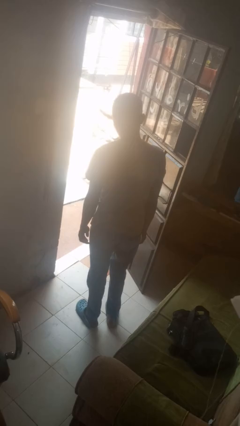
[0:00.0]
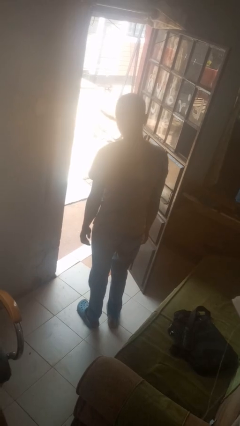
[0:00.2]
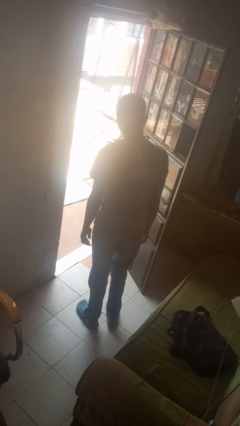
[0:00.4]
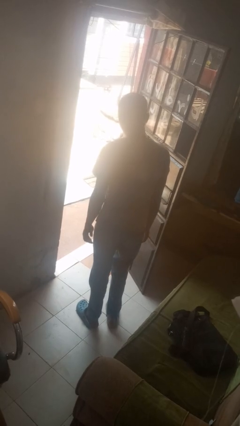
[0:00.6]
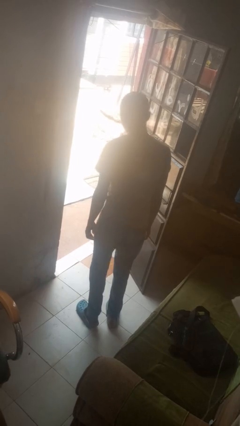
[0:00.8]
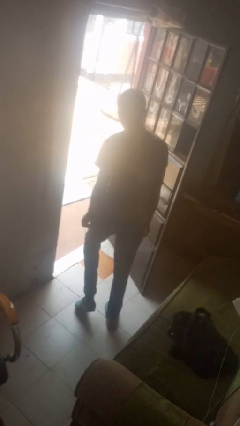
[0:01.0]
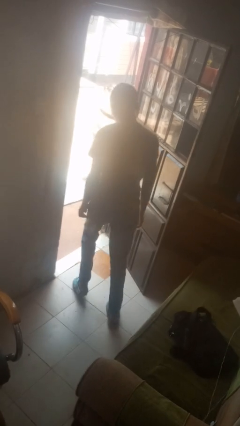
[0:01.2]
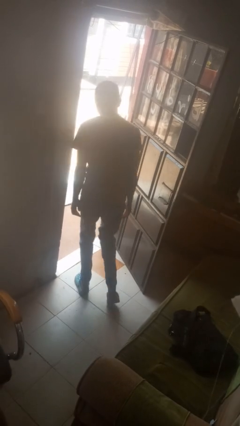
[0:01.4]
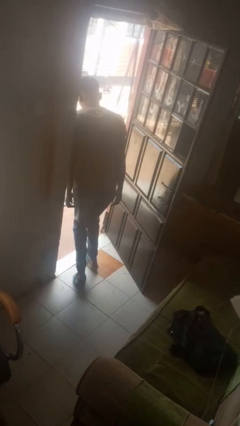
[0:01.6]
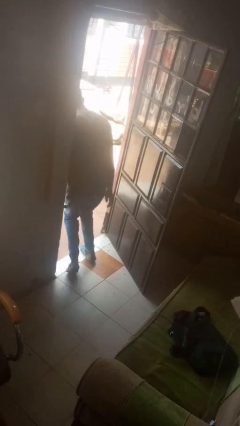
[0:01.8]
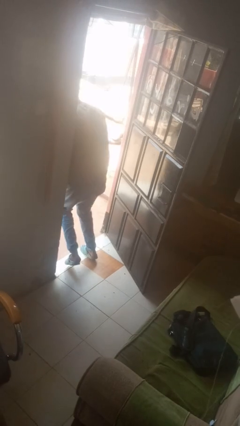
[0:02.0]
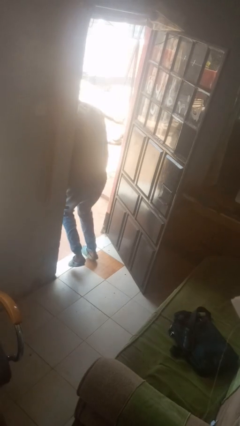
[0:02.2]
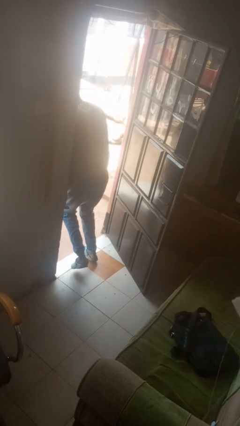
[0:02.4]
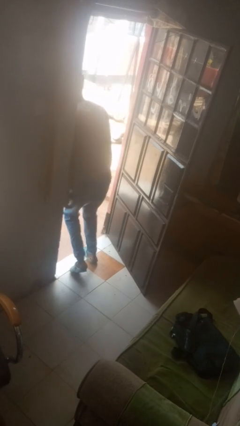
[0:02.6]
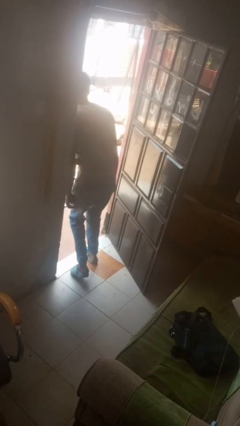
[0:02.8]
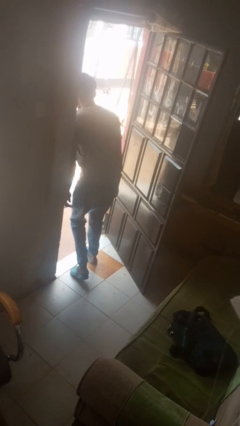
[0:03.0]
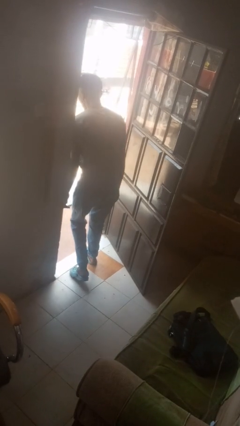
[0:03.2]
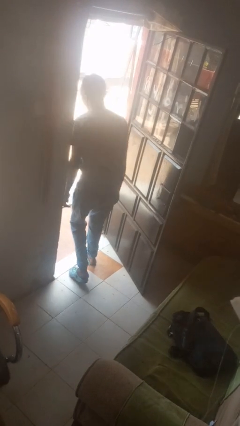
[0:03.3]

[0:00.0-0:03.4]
person bumps into wall

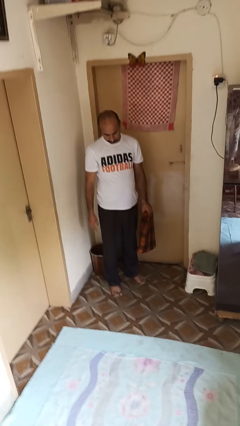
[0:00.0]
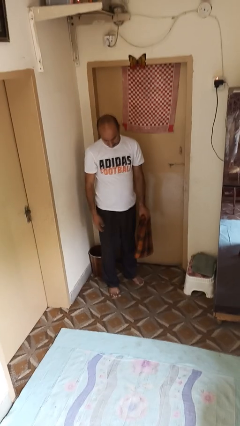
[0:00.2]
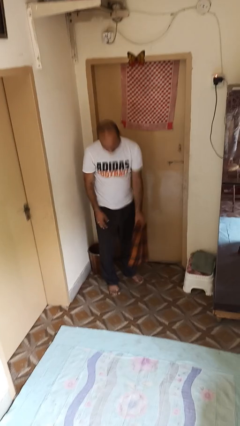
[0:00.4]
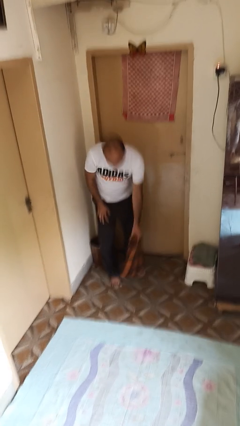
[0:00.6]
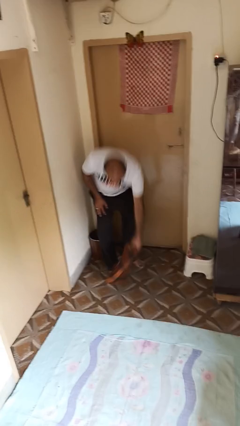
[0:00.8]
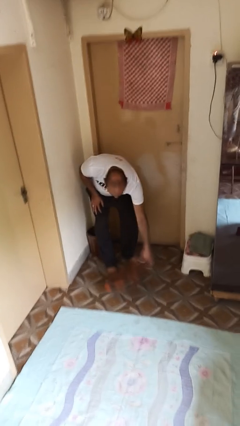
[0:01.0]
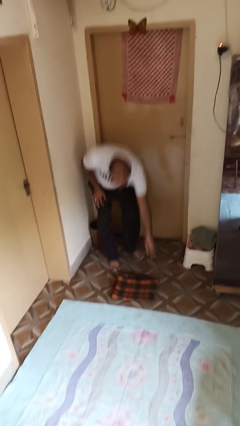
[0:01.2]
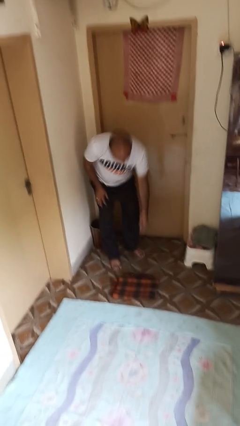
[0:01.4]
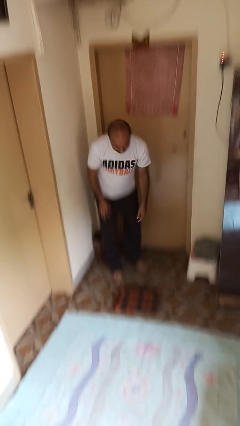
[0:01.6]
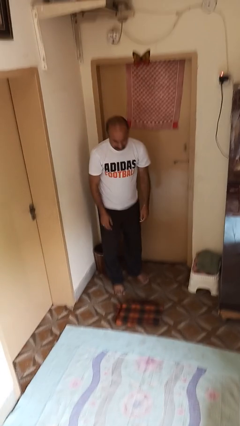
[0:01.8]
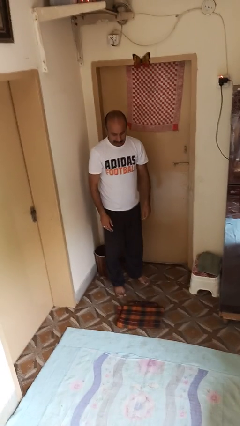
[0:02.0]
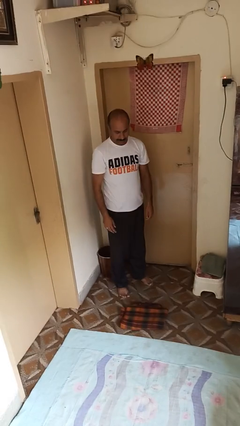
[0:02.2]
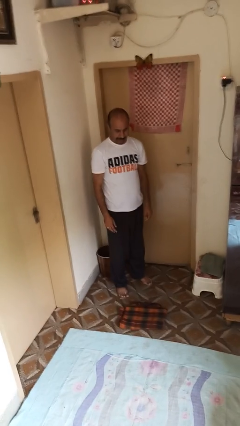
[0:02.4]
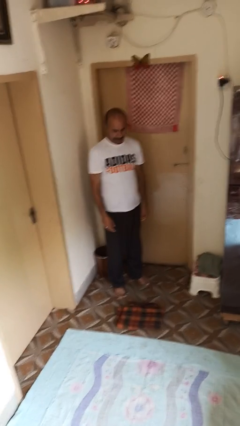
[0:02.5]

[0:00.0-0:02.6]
person puts down object on couch

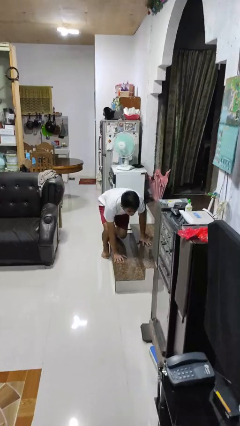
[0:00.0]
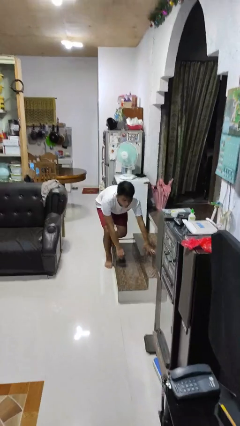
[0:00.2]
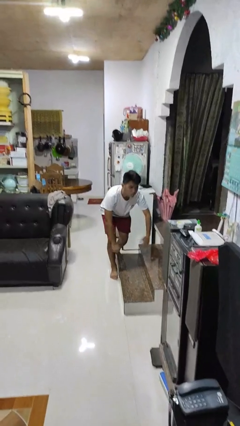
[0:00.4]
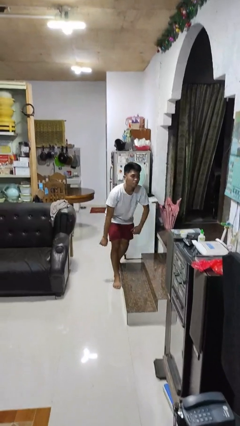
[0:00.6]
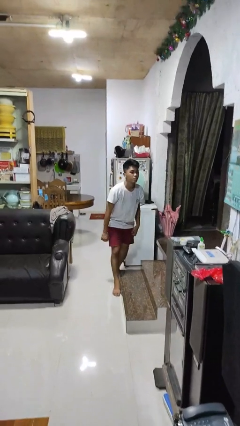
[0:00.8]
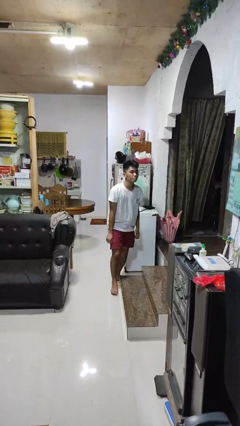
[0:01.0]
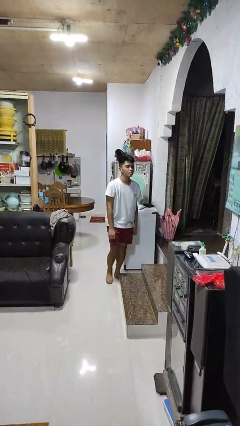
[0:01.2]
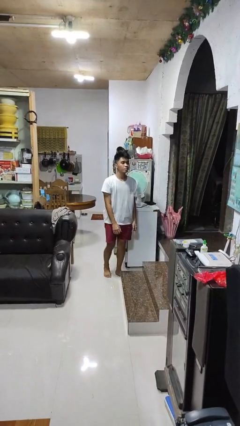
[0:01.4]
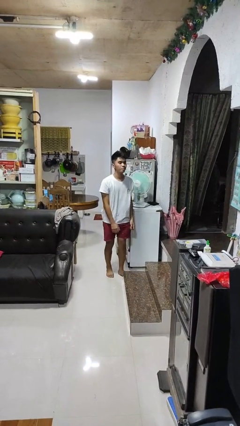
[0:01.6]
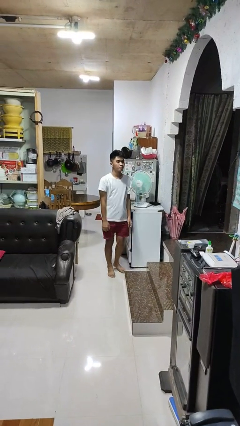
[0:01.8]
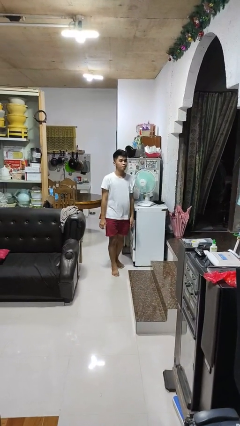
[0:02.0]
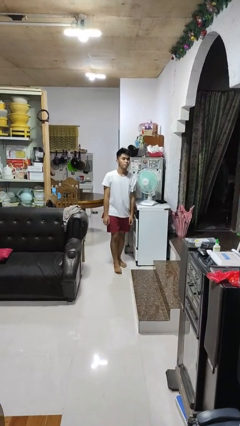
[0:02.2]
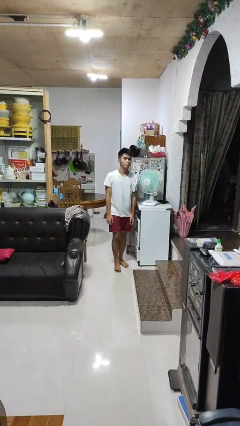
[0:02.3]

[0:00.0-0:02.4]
person stands up from floor

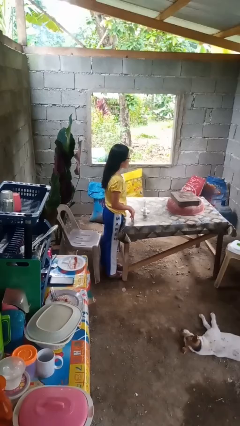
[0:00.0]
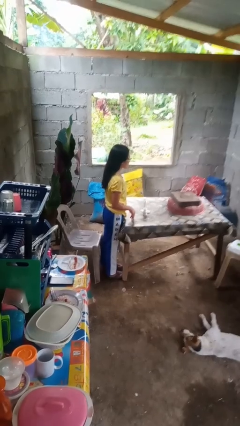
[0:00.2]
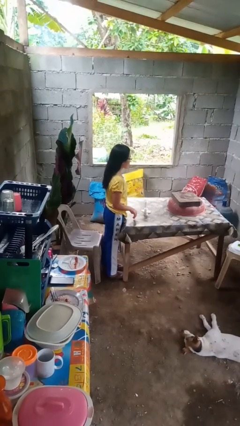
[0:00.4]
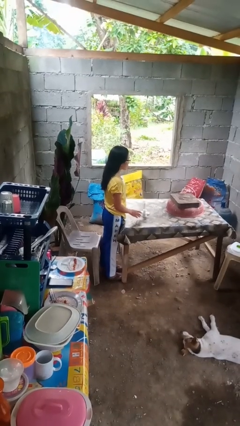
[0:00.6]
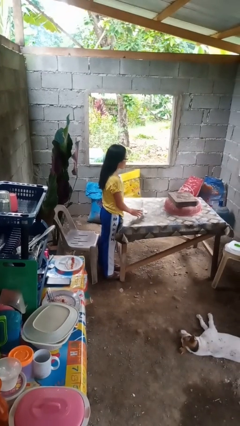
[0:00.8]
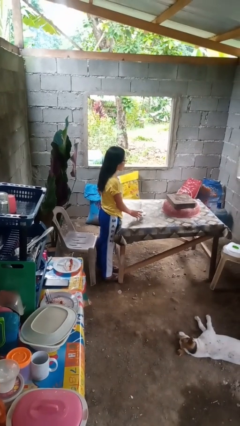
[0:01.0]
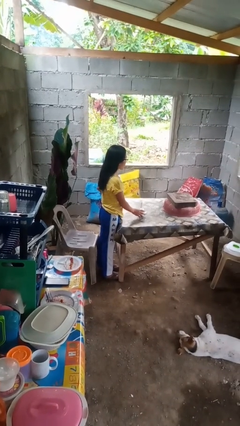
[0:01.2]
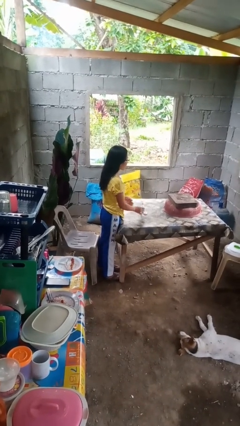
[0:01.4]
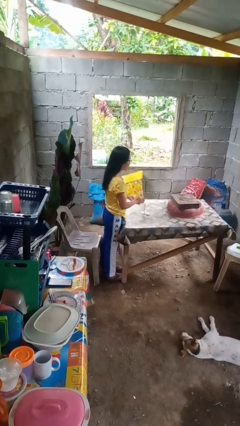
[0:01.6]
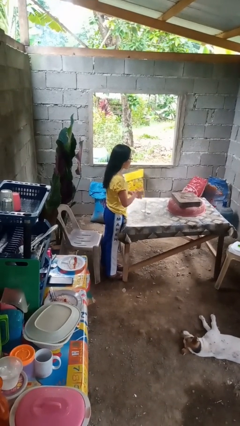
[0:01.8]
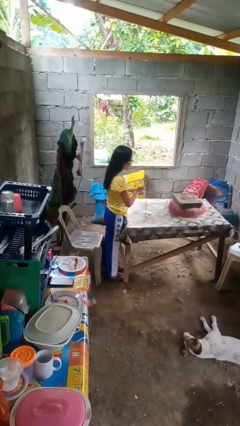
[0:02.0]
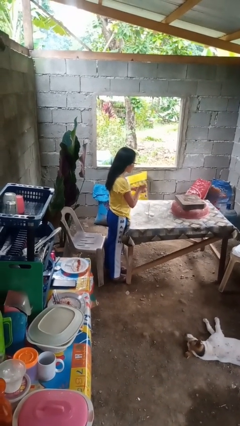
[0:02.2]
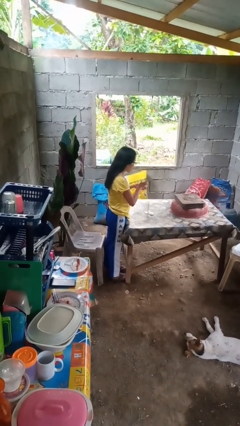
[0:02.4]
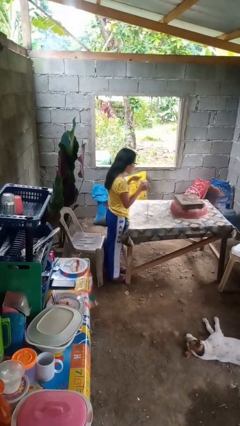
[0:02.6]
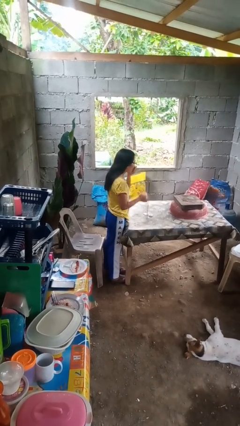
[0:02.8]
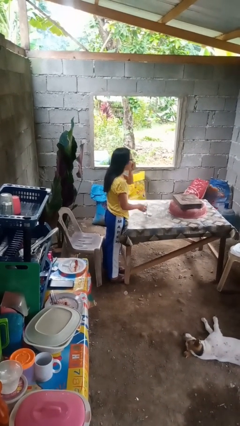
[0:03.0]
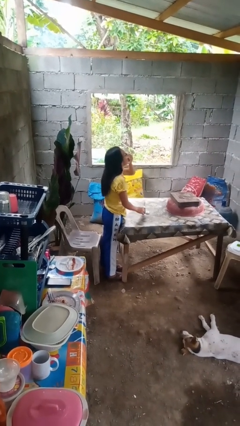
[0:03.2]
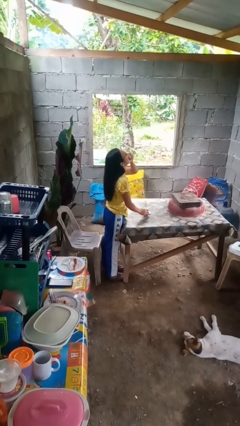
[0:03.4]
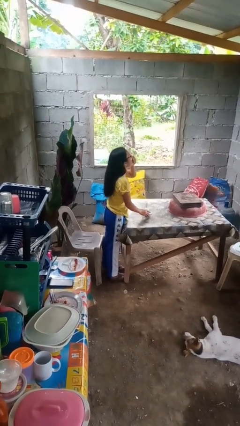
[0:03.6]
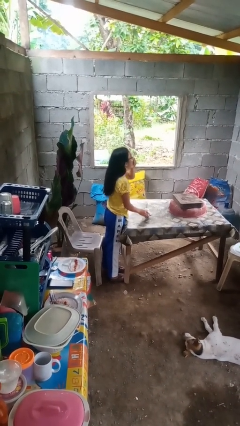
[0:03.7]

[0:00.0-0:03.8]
person takes medicine pills

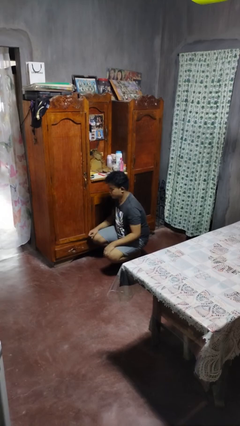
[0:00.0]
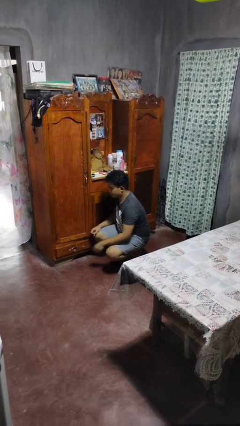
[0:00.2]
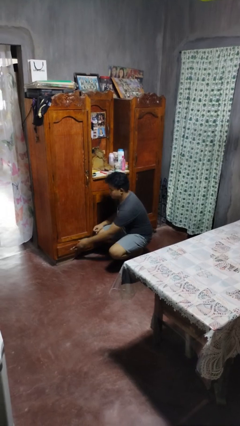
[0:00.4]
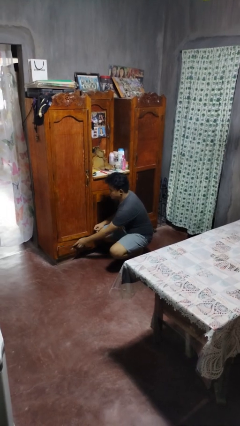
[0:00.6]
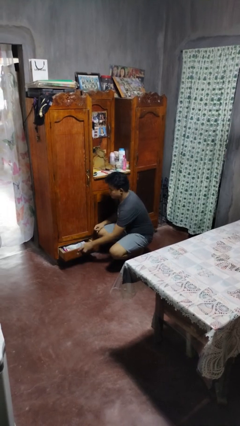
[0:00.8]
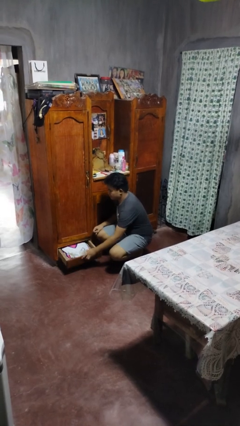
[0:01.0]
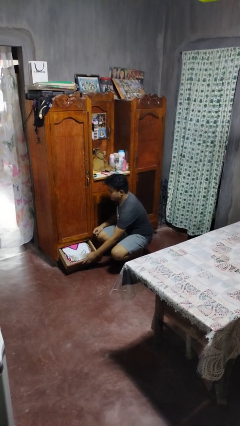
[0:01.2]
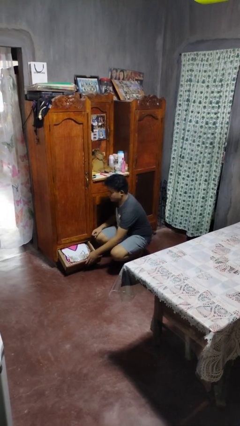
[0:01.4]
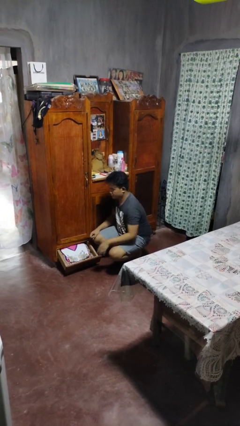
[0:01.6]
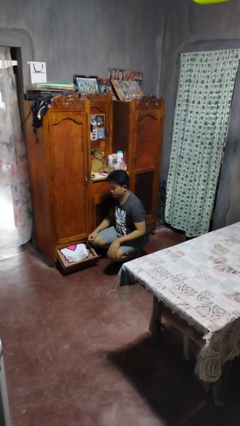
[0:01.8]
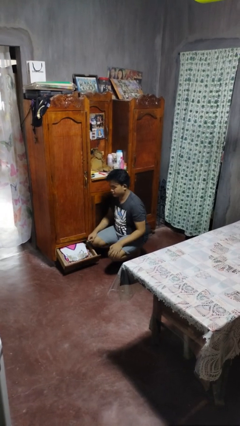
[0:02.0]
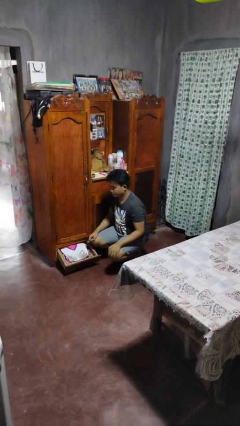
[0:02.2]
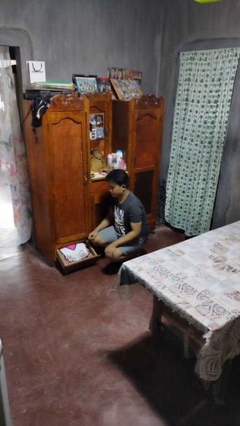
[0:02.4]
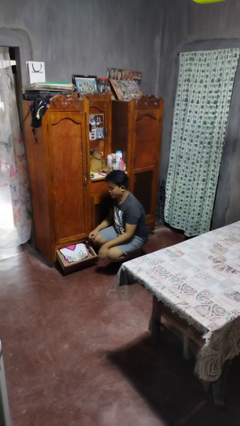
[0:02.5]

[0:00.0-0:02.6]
person opens dresser drawer

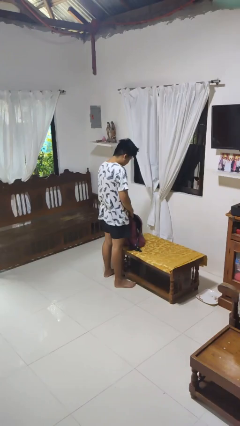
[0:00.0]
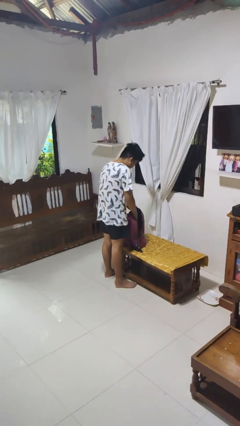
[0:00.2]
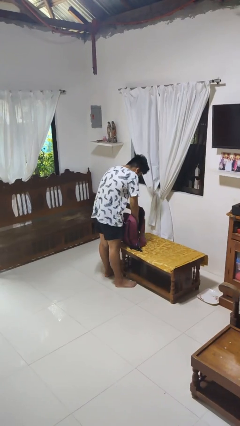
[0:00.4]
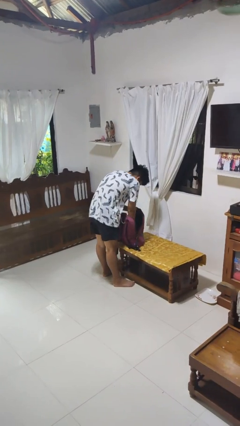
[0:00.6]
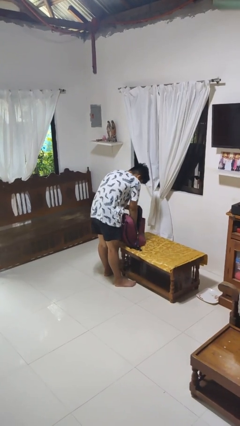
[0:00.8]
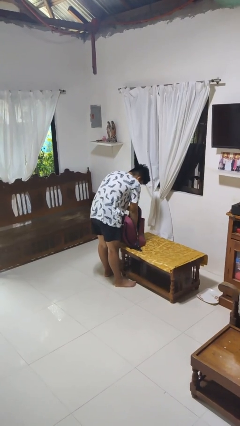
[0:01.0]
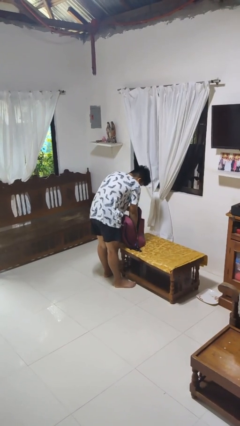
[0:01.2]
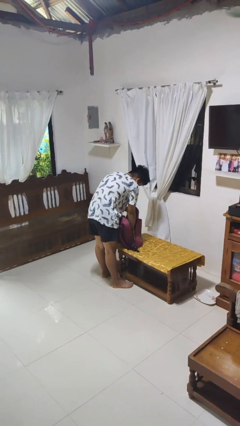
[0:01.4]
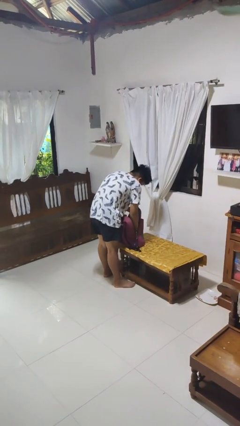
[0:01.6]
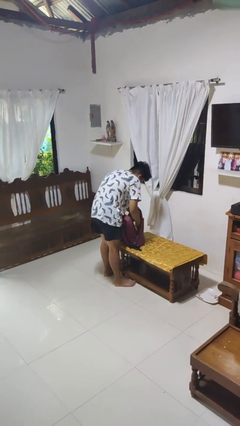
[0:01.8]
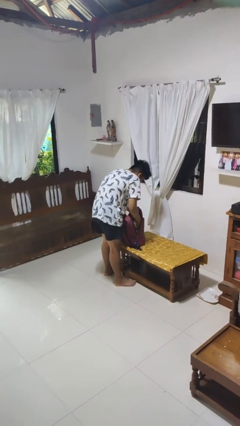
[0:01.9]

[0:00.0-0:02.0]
person searches in bag

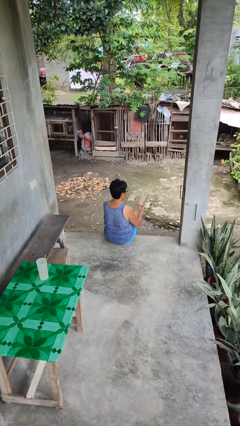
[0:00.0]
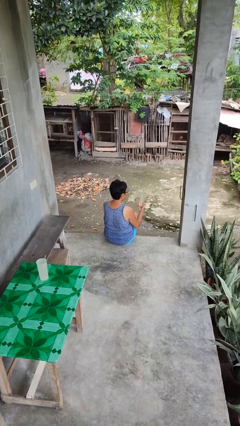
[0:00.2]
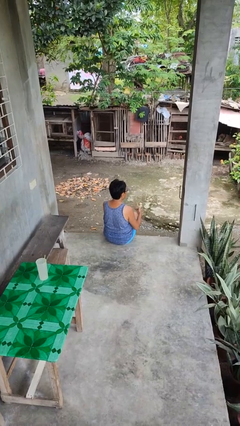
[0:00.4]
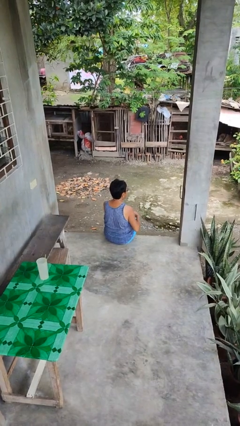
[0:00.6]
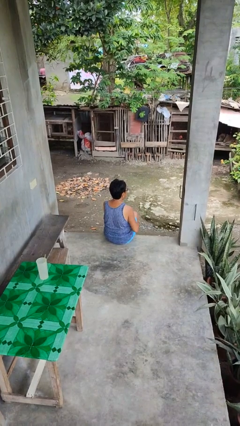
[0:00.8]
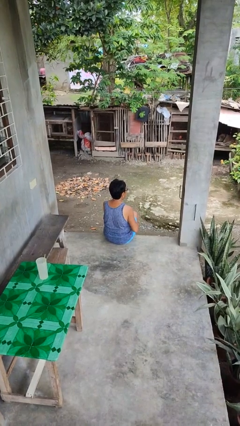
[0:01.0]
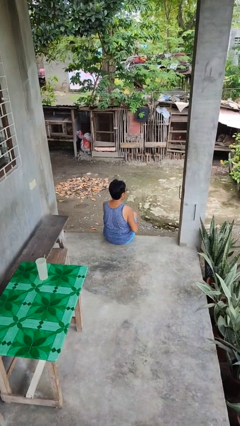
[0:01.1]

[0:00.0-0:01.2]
person puts phone into pocket
